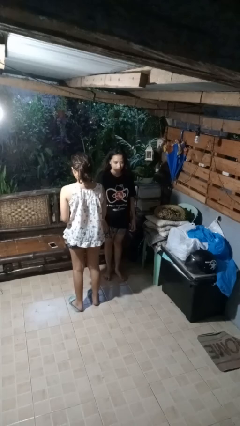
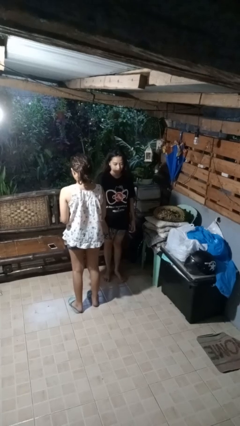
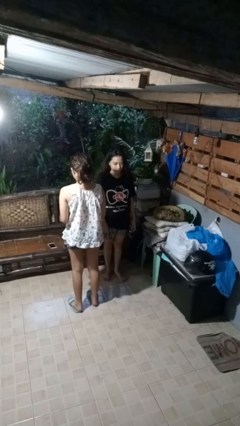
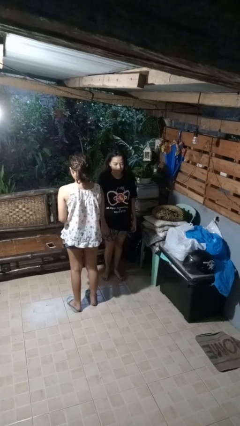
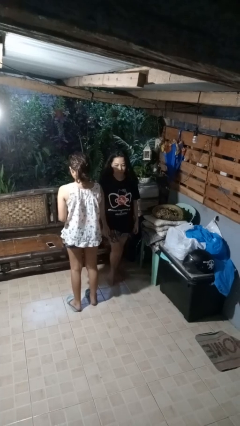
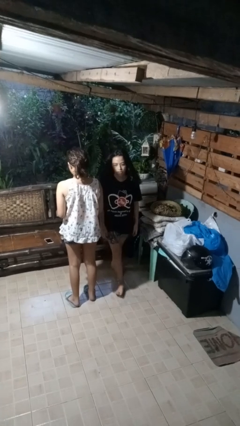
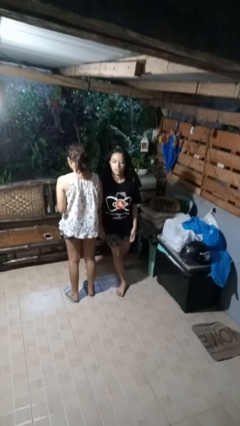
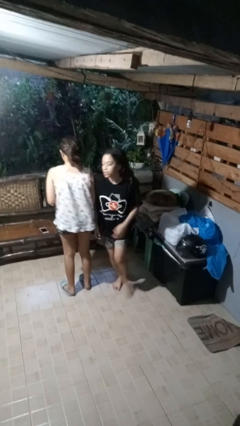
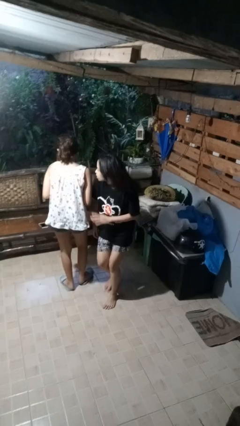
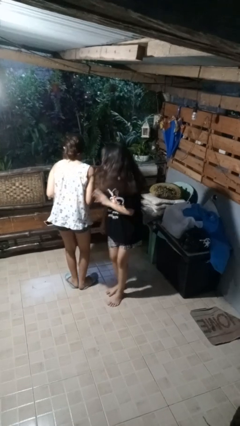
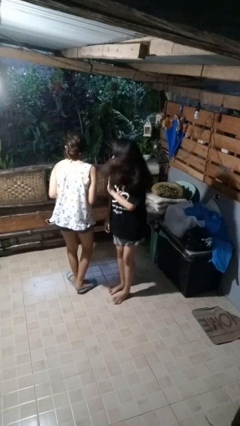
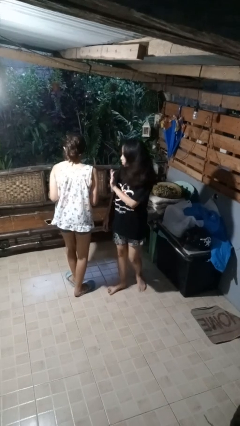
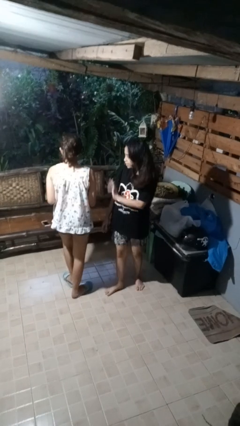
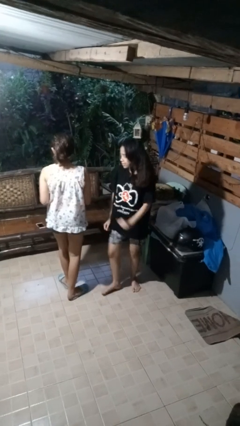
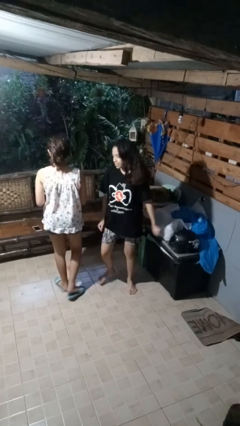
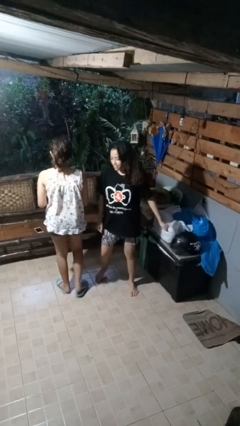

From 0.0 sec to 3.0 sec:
person bumps into person

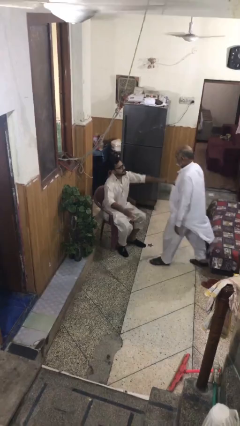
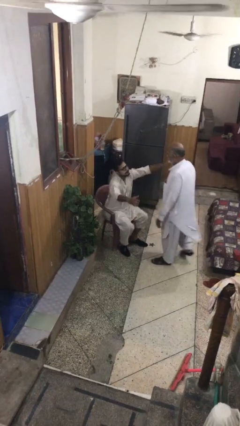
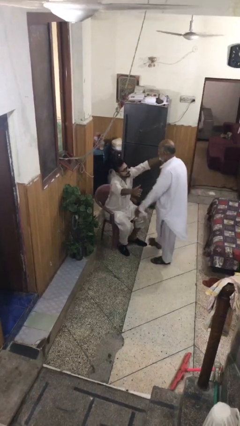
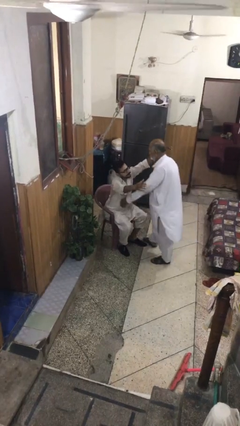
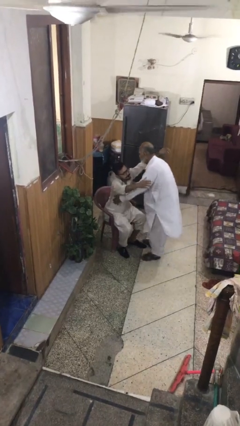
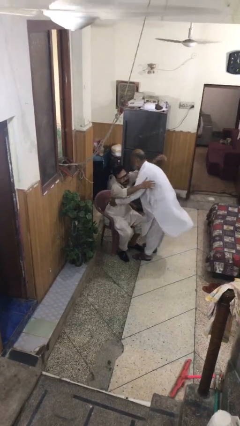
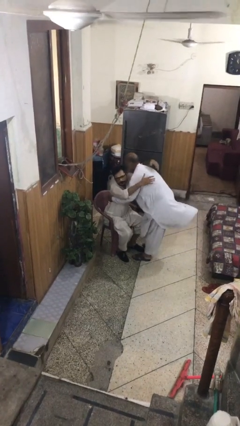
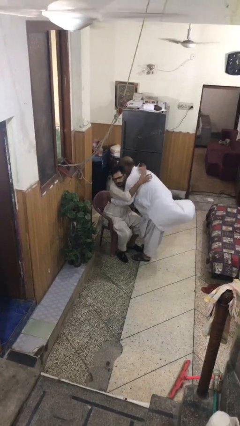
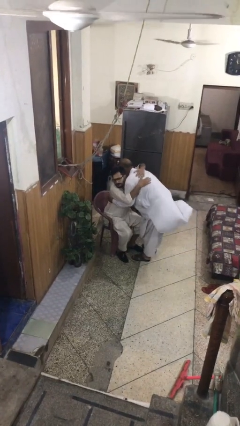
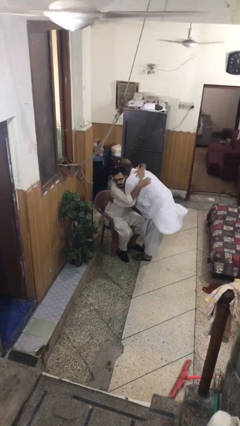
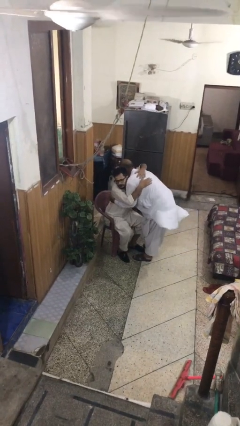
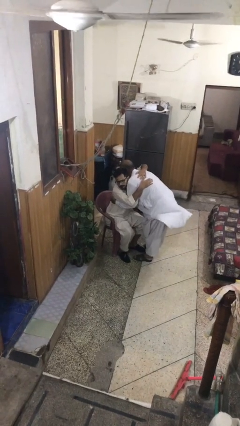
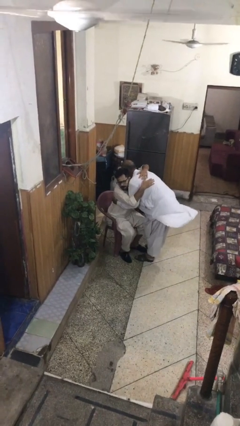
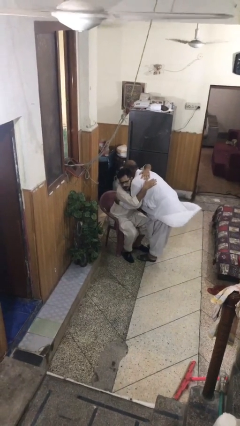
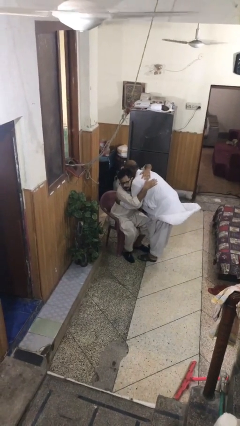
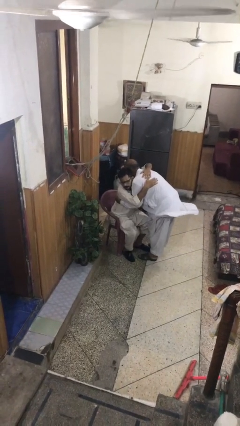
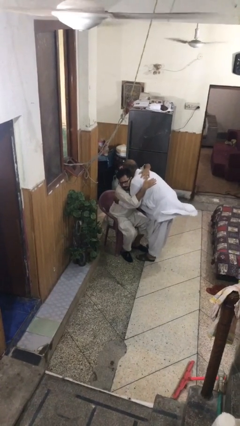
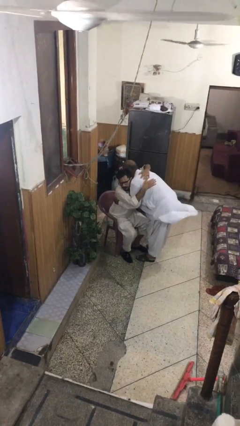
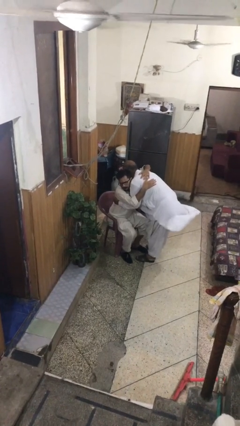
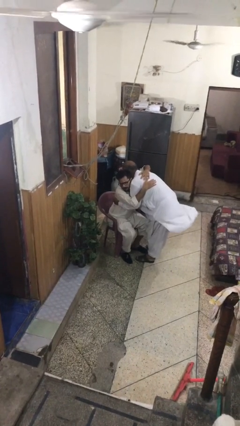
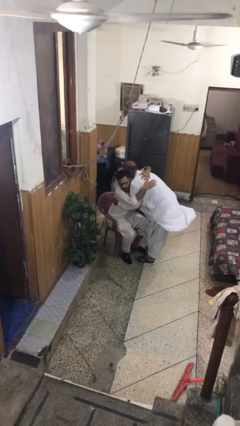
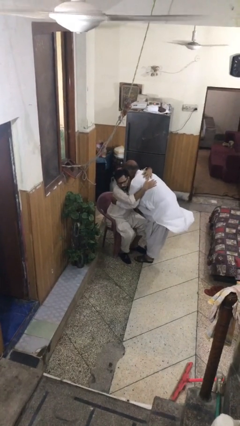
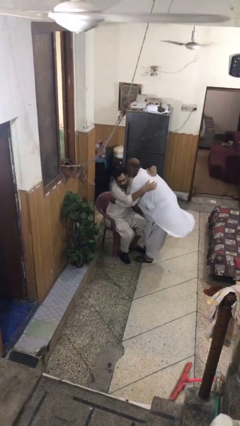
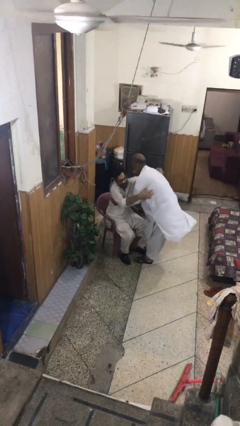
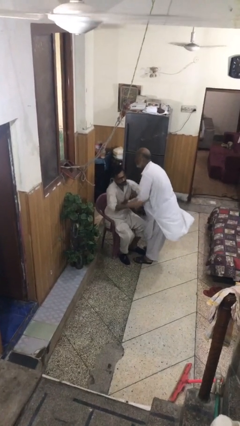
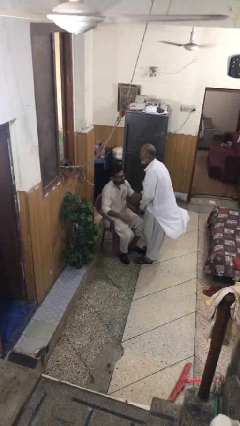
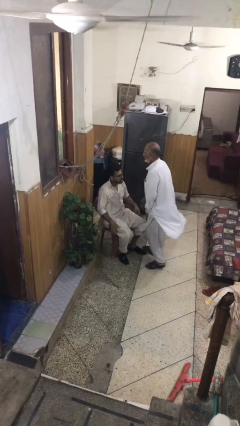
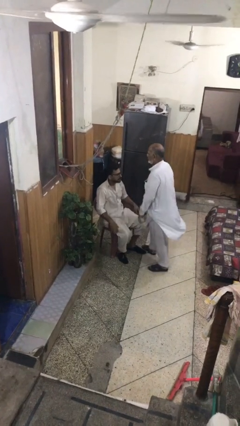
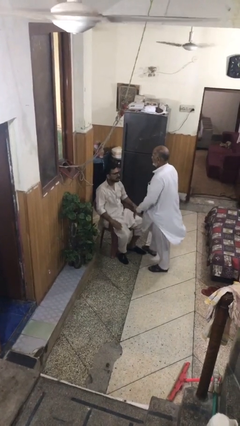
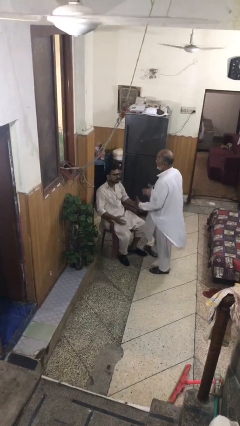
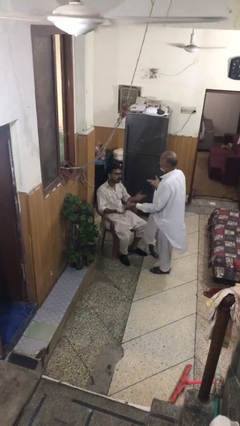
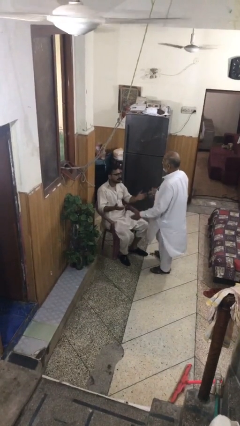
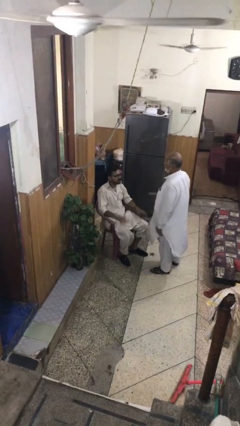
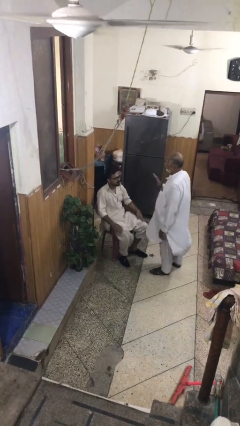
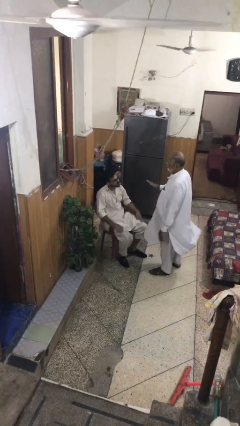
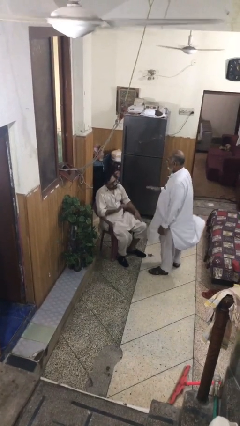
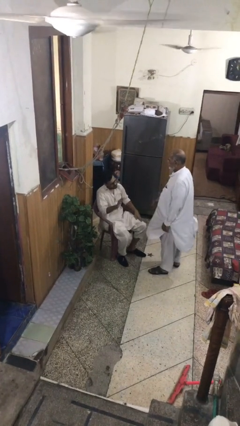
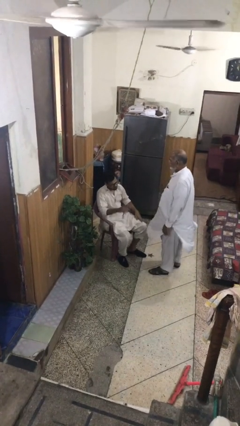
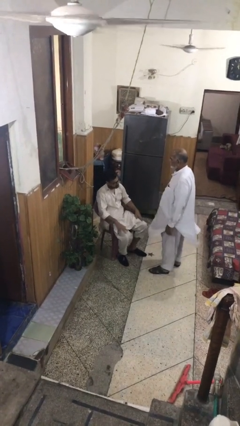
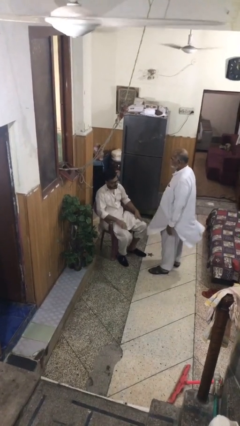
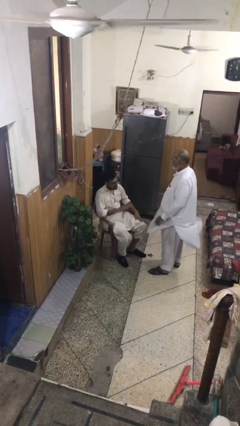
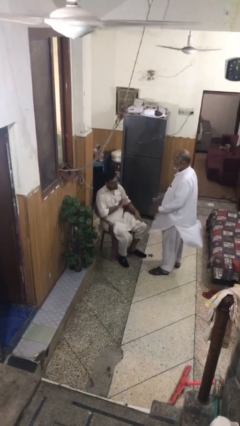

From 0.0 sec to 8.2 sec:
person embraces person

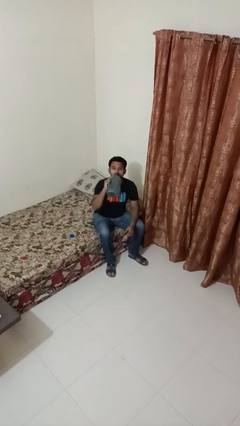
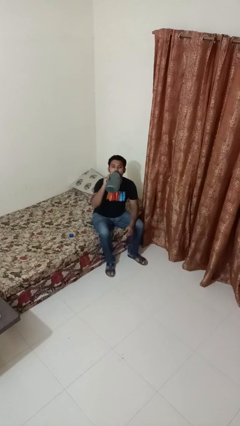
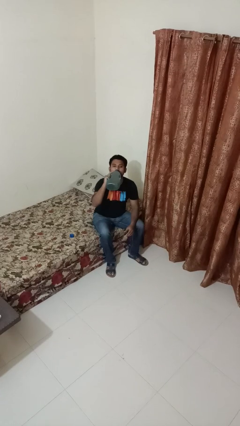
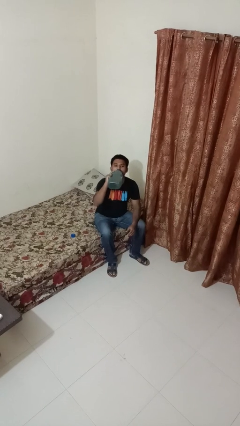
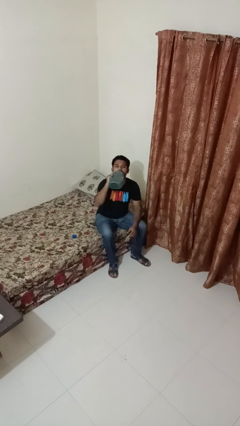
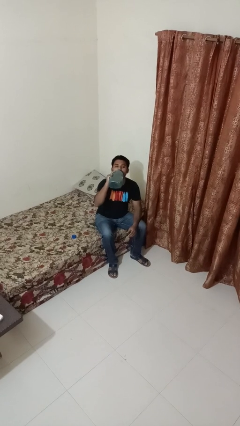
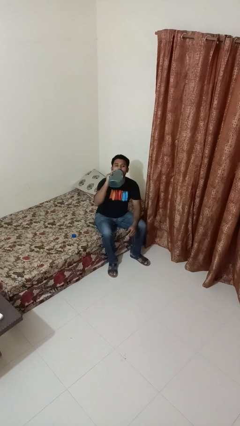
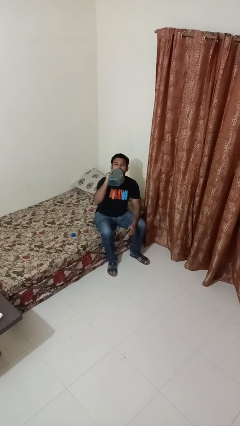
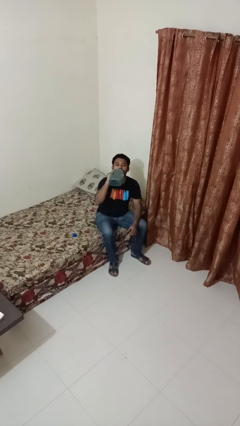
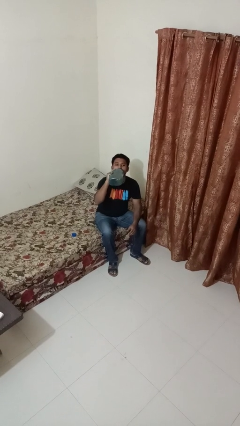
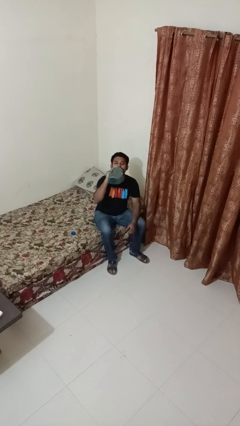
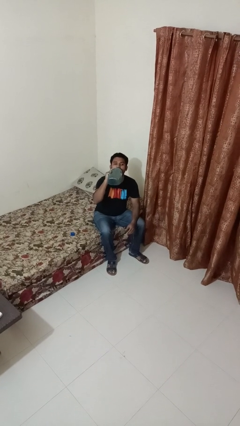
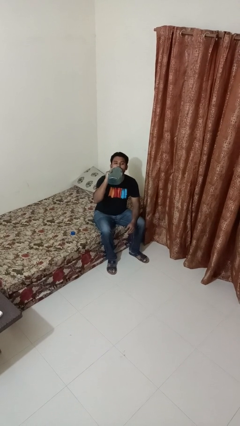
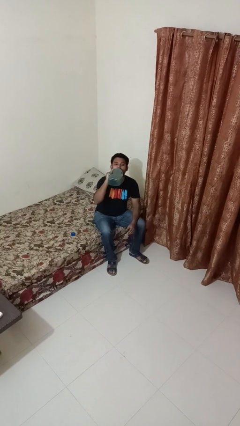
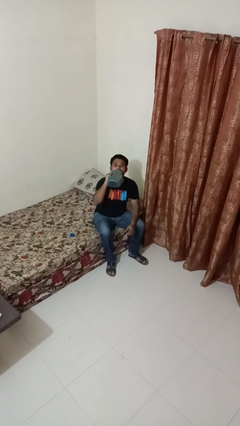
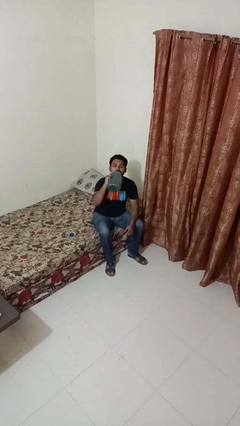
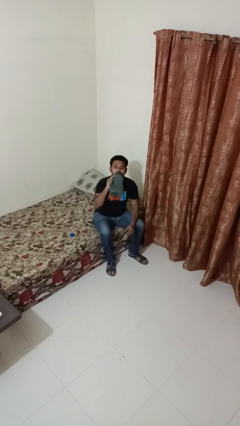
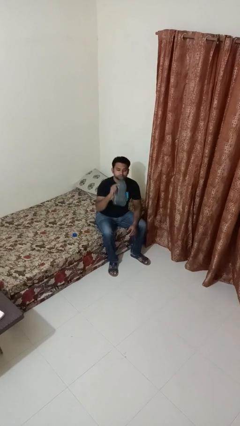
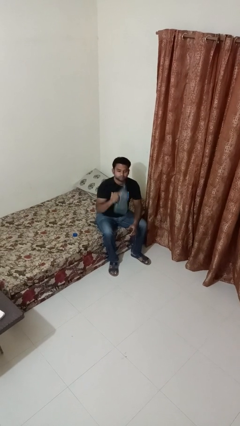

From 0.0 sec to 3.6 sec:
person drinks from bottle

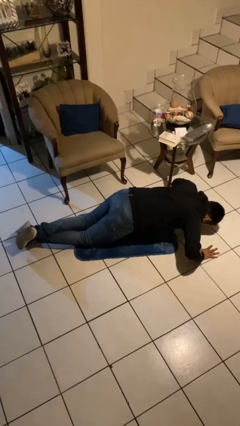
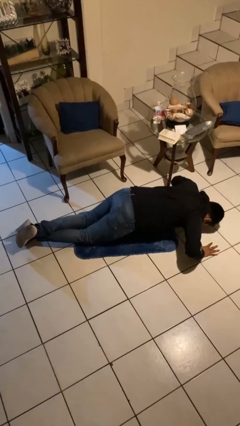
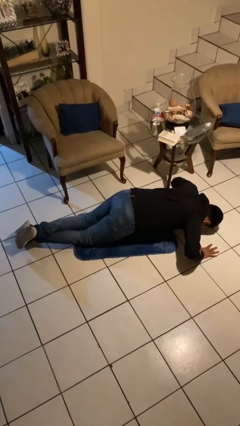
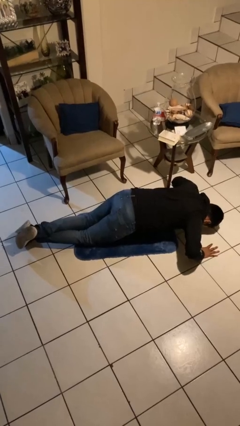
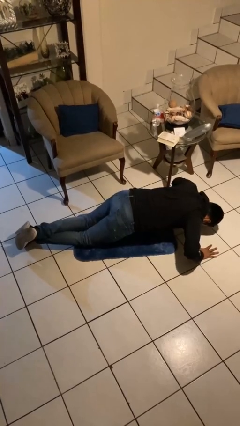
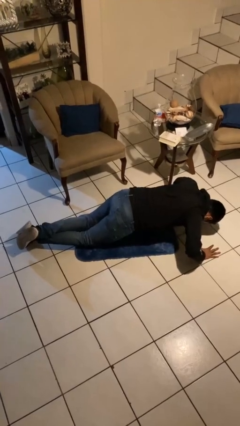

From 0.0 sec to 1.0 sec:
person exercises with pushup

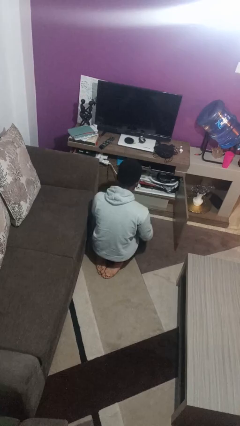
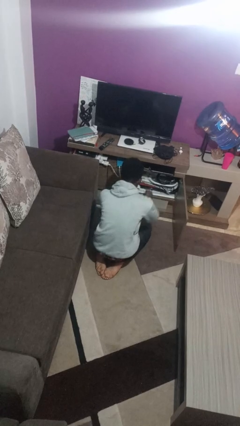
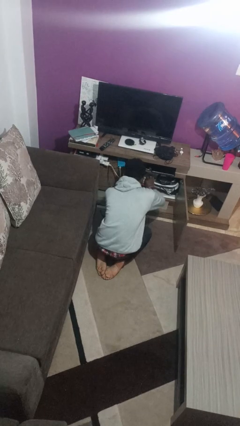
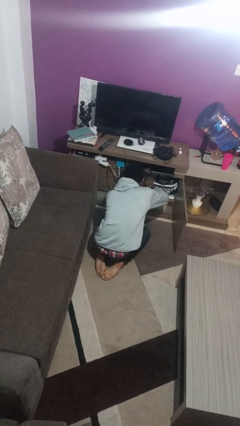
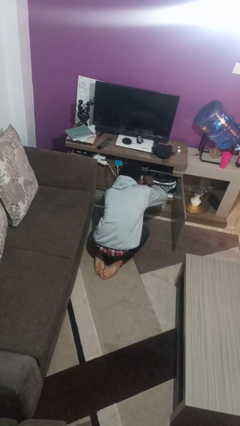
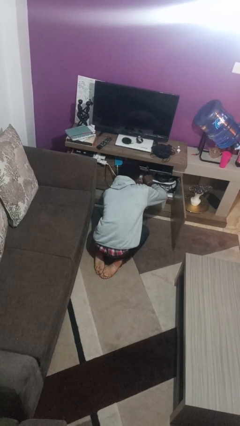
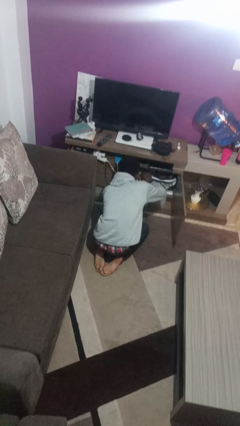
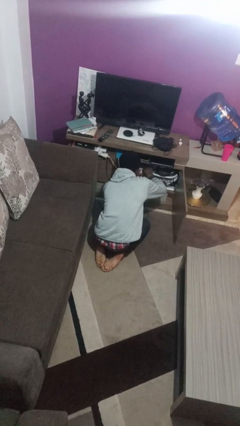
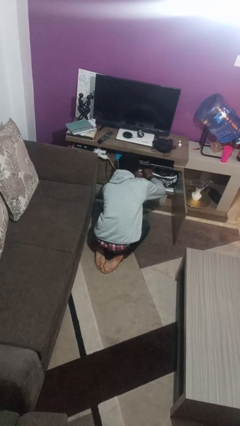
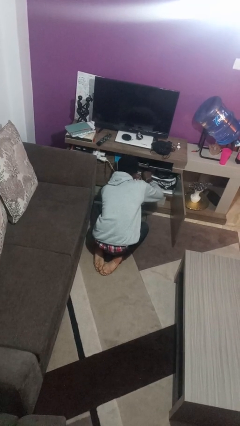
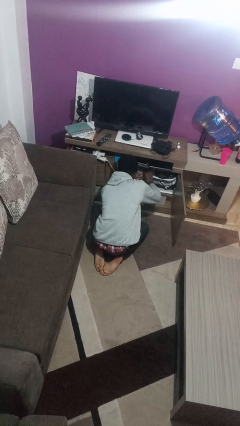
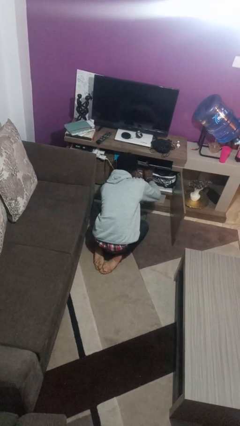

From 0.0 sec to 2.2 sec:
person searches in cabinet
